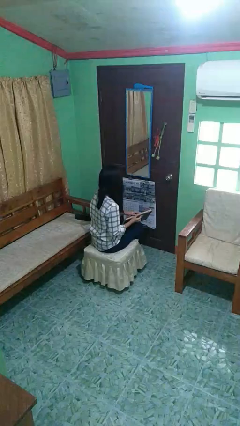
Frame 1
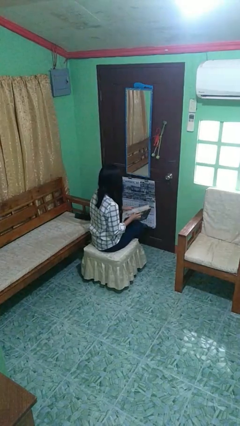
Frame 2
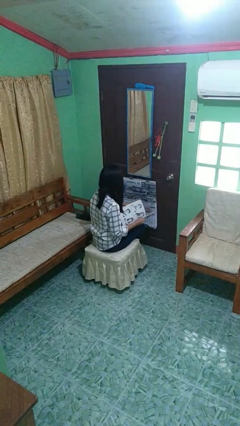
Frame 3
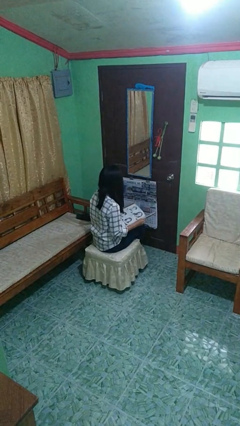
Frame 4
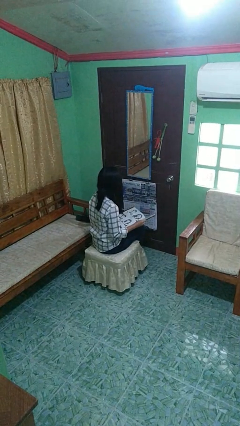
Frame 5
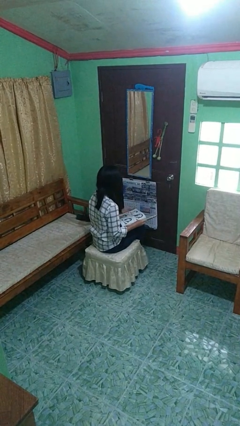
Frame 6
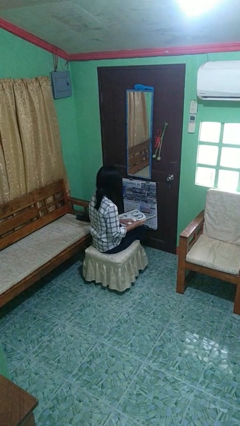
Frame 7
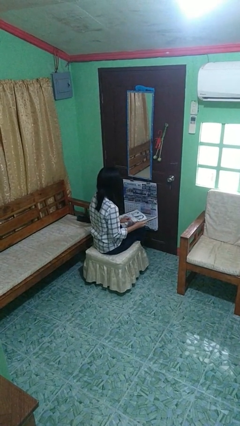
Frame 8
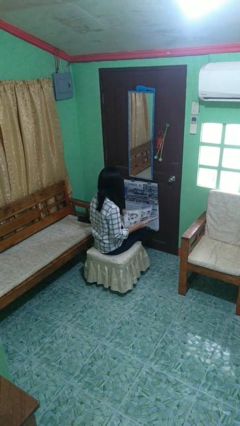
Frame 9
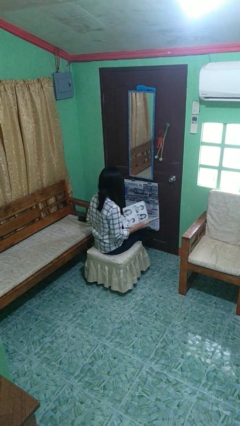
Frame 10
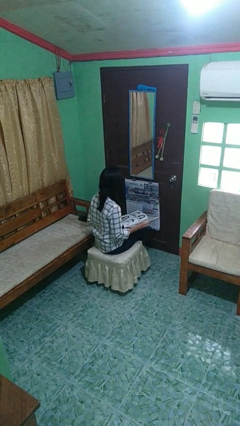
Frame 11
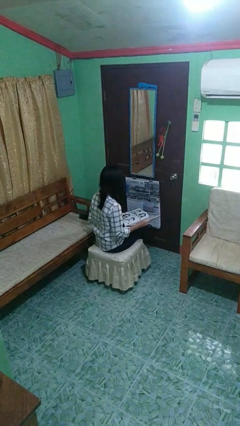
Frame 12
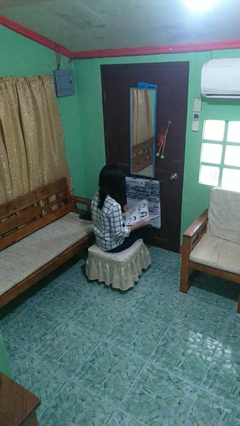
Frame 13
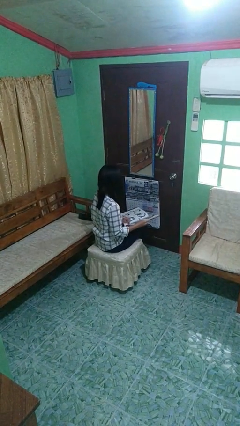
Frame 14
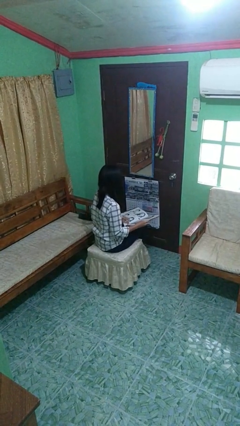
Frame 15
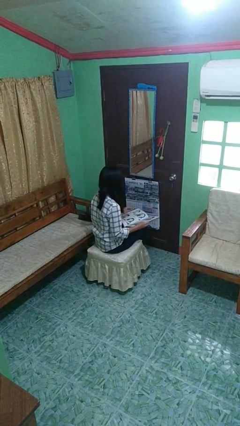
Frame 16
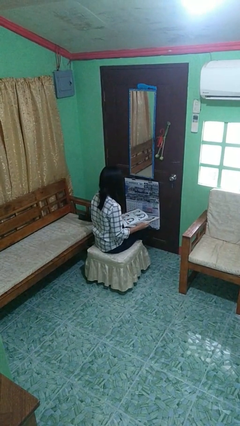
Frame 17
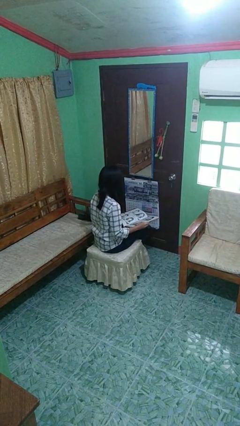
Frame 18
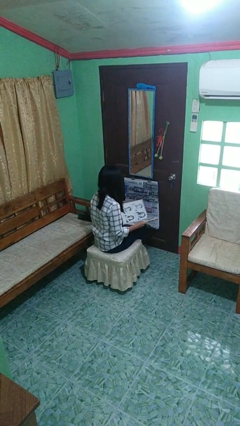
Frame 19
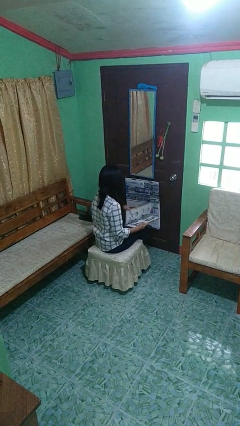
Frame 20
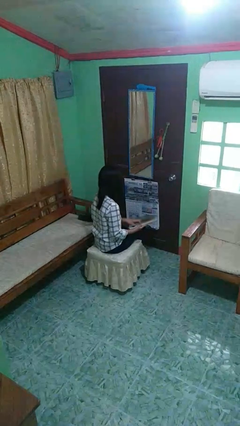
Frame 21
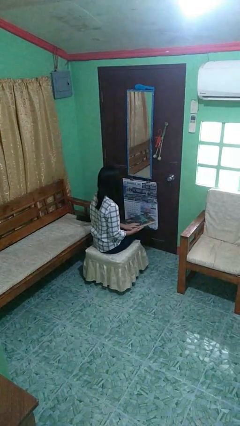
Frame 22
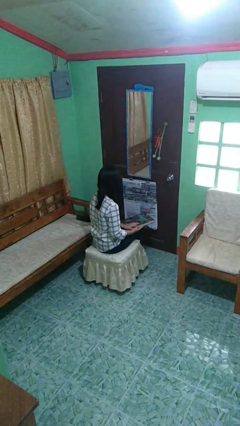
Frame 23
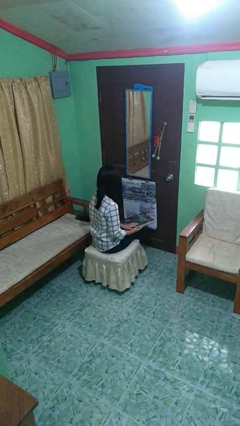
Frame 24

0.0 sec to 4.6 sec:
person reads book

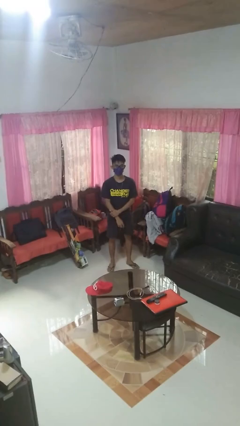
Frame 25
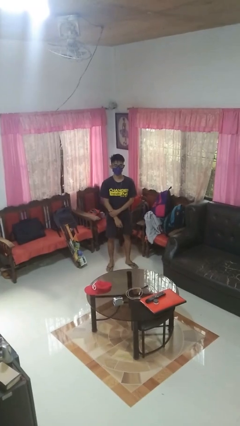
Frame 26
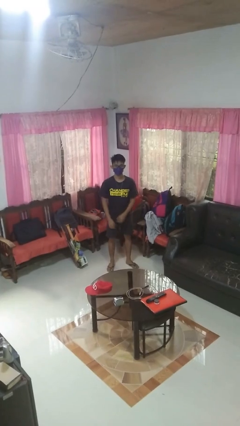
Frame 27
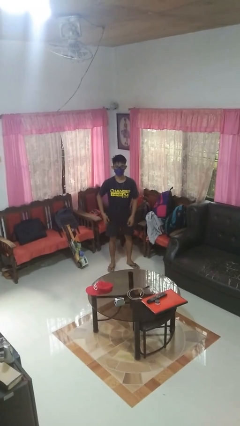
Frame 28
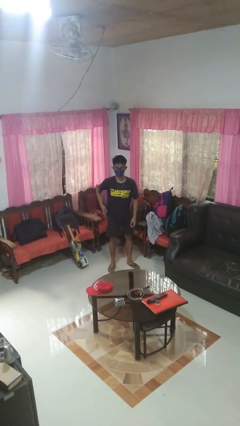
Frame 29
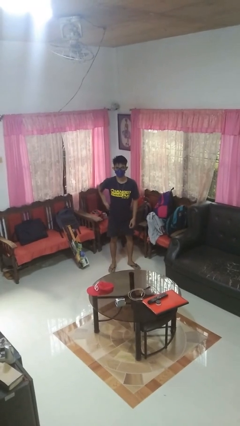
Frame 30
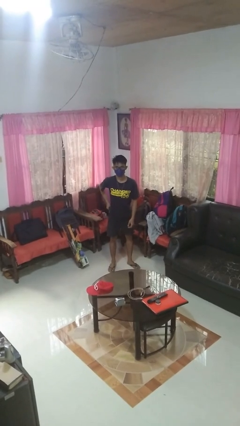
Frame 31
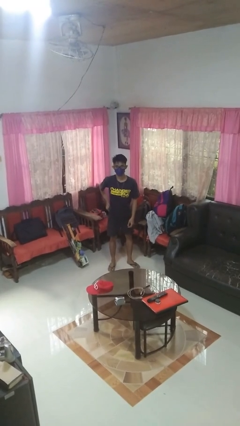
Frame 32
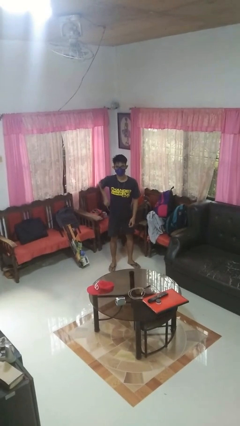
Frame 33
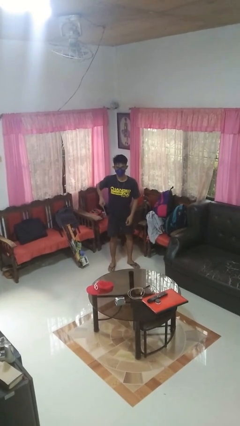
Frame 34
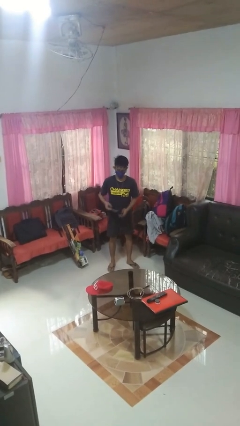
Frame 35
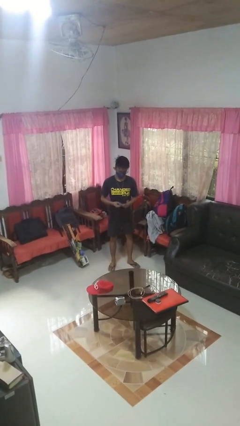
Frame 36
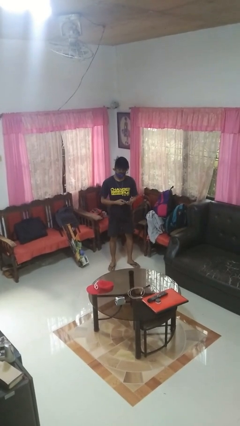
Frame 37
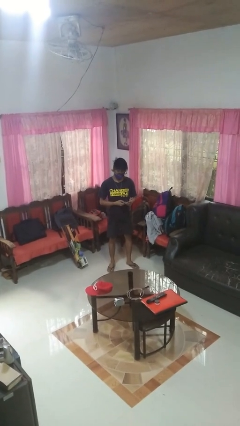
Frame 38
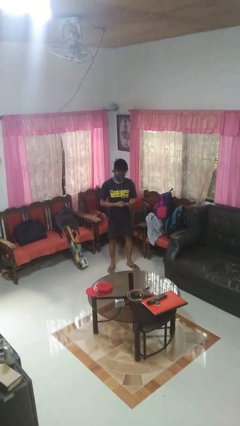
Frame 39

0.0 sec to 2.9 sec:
person takes phone from pocket

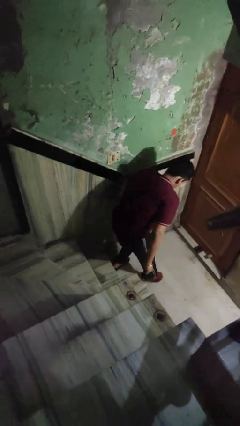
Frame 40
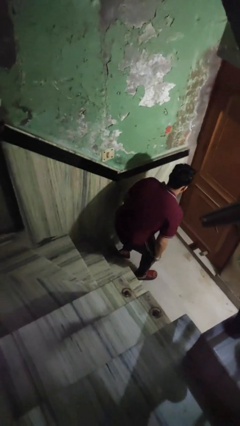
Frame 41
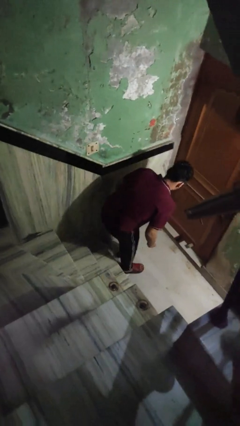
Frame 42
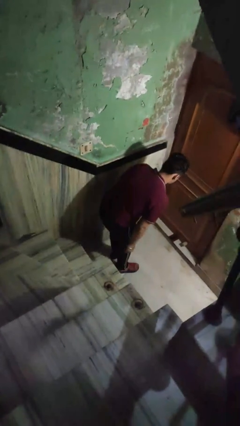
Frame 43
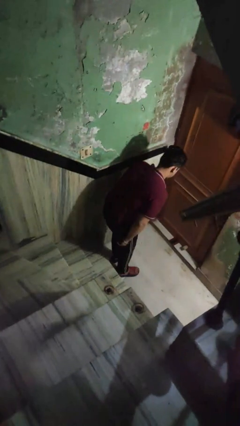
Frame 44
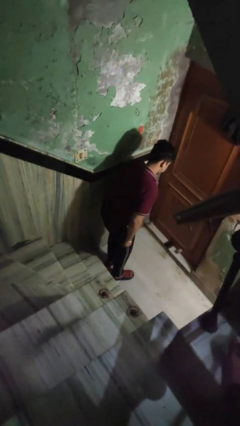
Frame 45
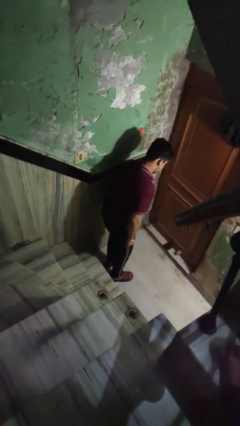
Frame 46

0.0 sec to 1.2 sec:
person trips on stair

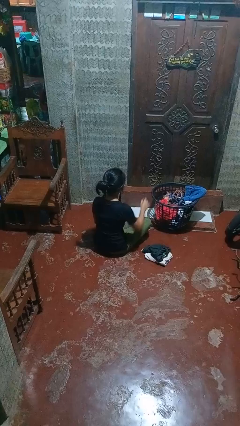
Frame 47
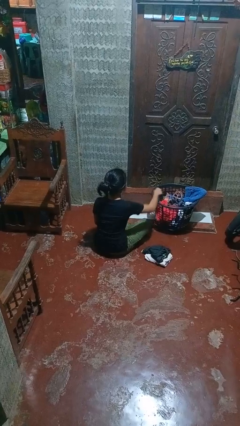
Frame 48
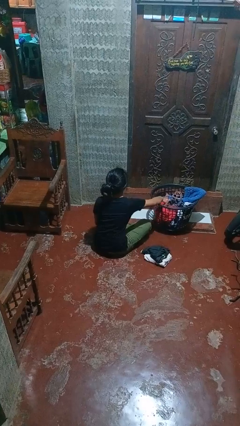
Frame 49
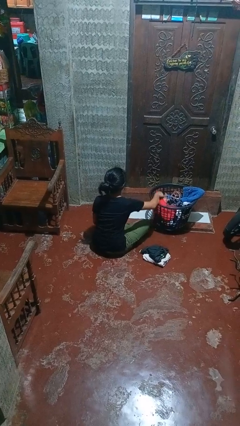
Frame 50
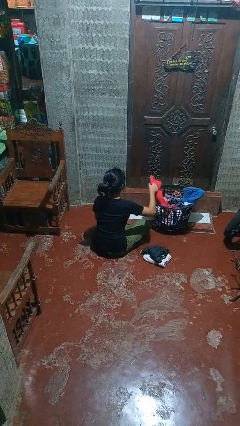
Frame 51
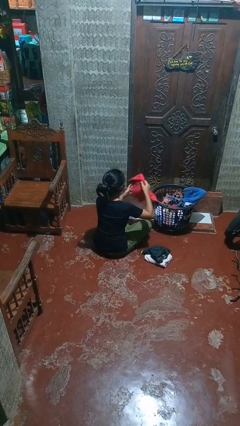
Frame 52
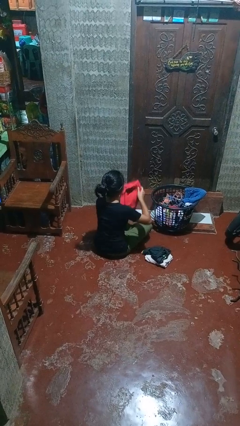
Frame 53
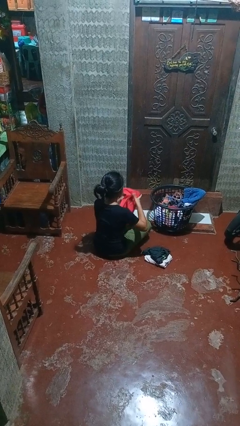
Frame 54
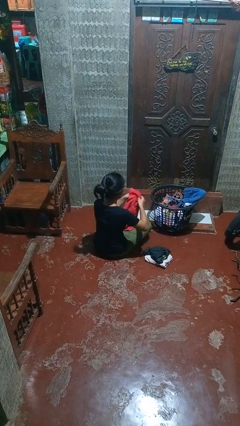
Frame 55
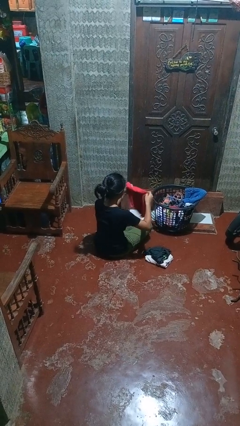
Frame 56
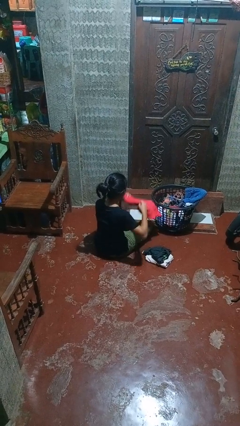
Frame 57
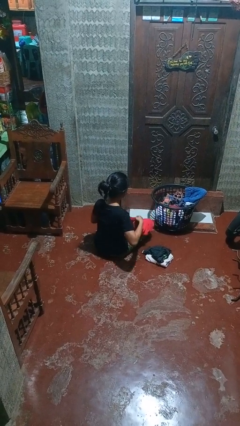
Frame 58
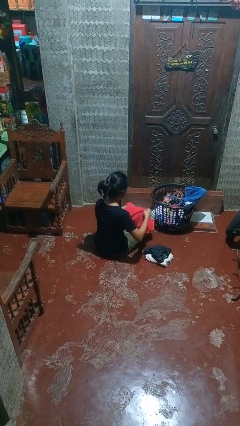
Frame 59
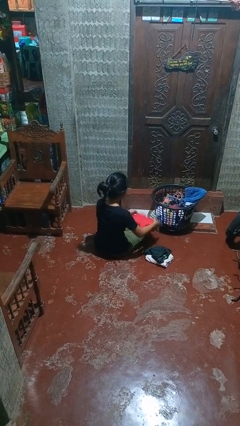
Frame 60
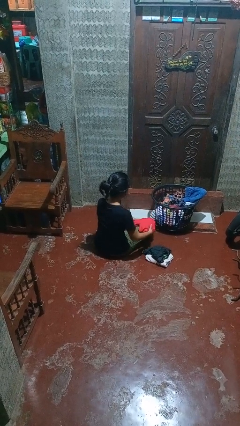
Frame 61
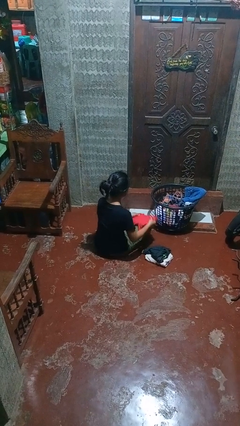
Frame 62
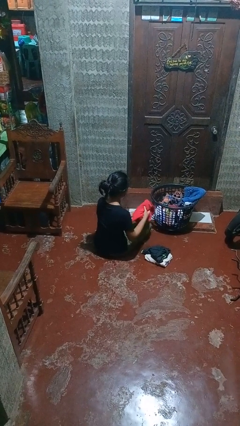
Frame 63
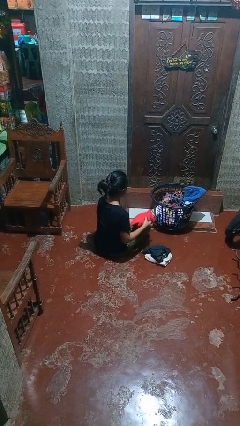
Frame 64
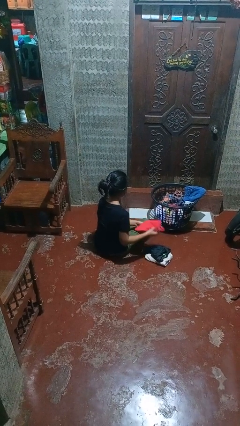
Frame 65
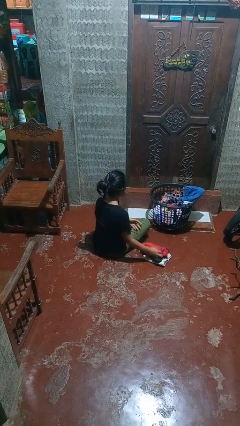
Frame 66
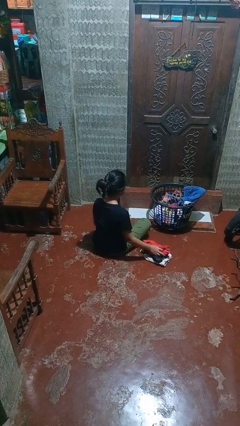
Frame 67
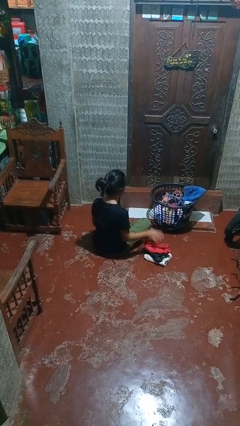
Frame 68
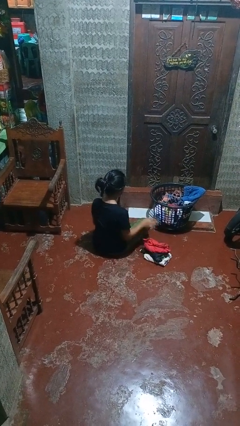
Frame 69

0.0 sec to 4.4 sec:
person folds shirt

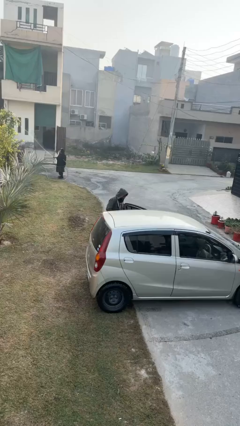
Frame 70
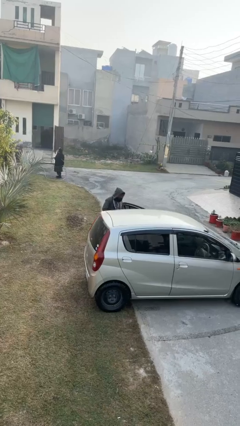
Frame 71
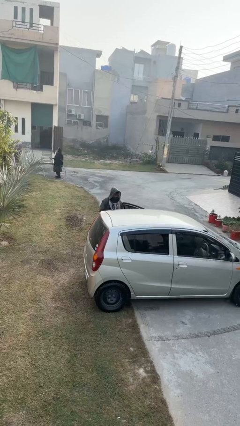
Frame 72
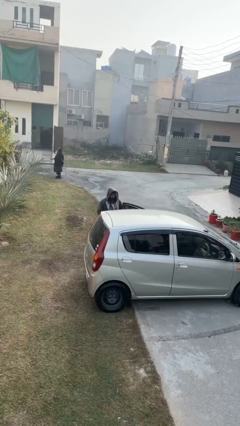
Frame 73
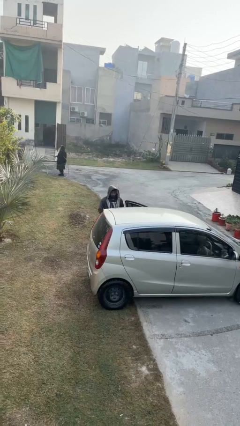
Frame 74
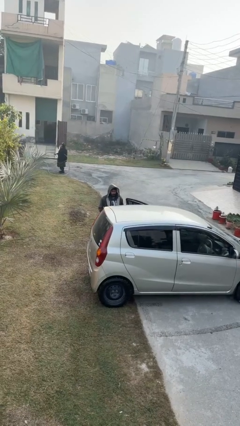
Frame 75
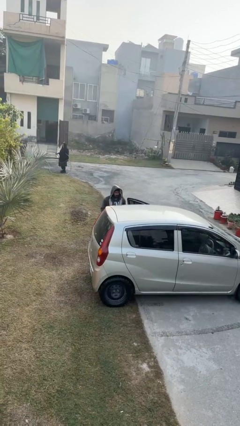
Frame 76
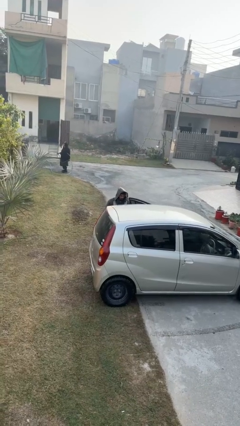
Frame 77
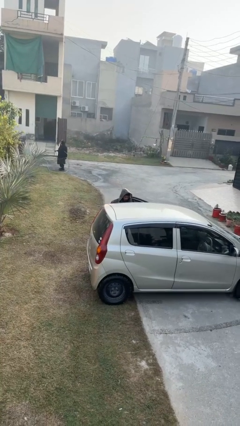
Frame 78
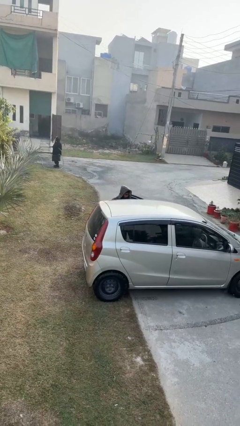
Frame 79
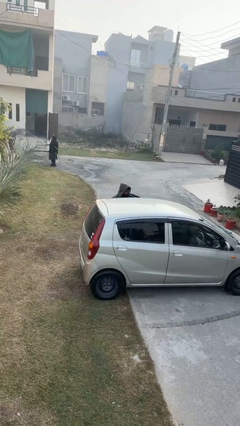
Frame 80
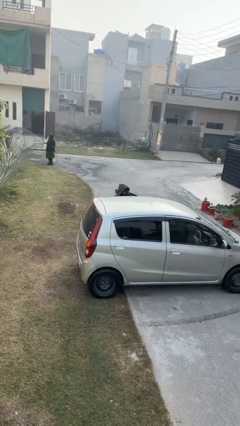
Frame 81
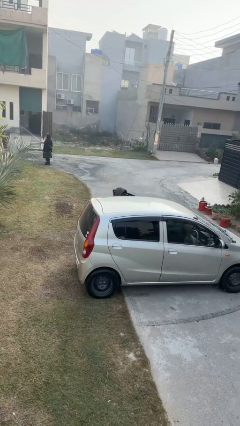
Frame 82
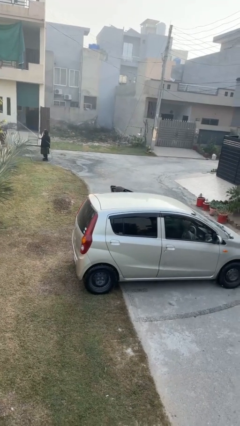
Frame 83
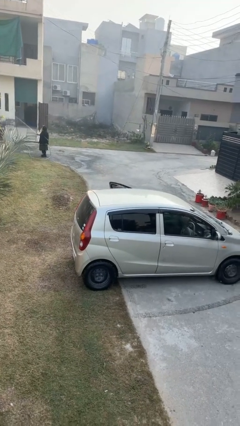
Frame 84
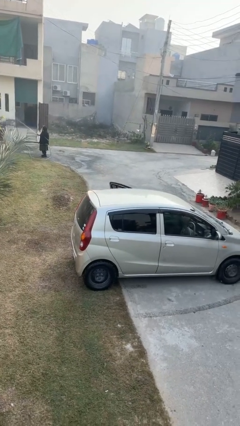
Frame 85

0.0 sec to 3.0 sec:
person enters car

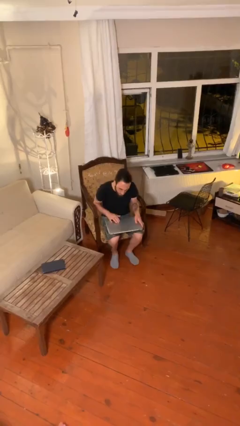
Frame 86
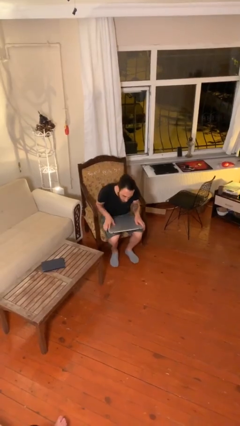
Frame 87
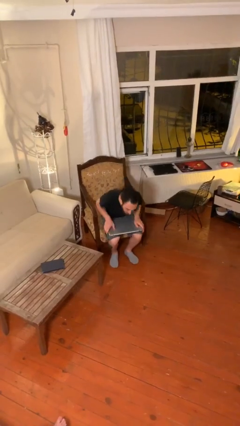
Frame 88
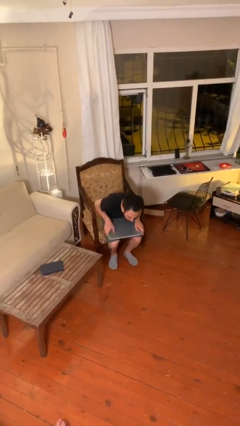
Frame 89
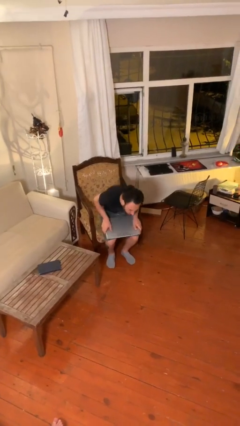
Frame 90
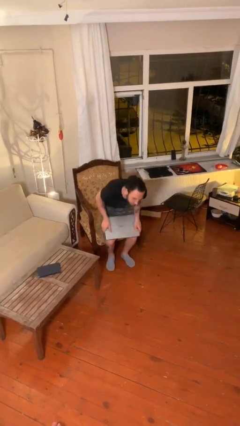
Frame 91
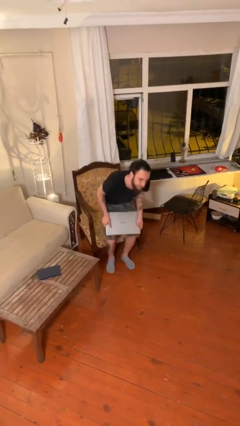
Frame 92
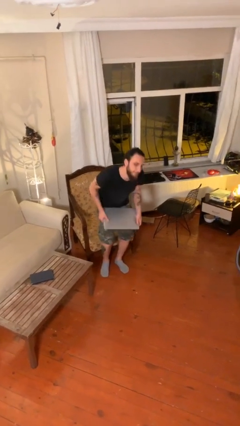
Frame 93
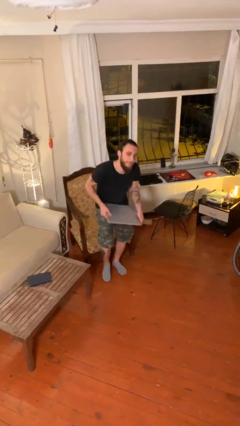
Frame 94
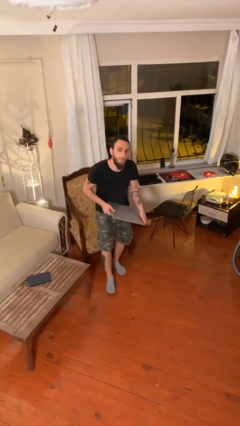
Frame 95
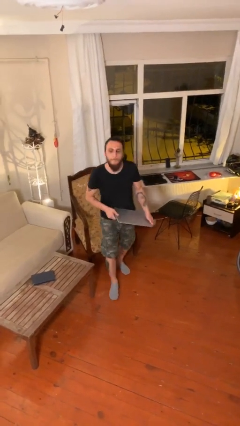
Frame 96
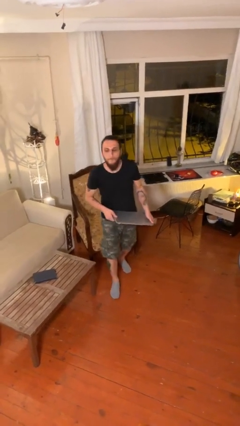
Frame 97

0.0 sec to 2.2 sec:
person stands up
